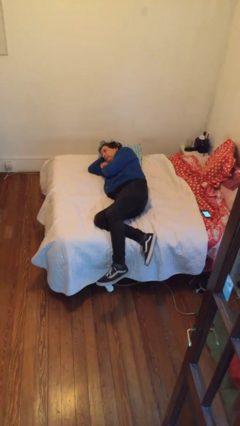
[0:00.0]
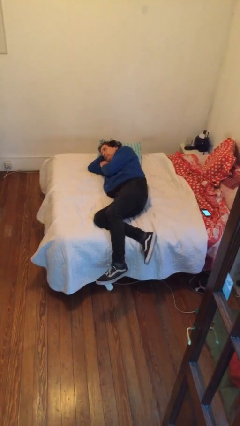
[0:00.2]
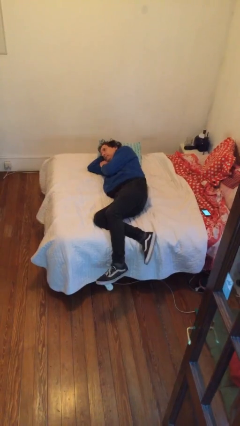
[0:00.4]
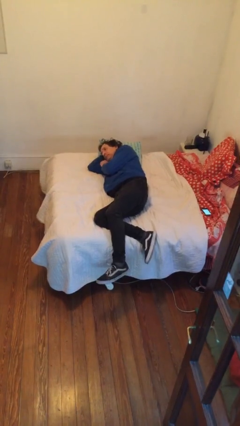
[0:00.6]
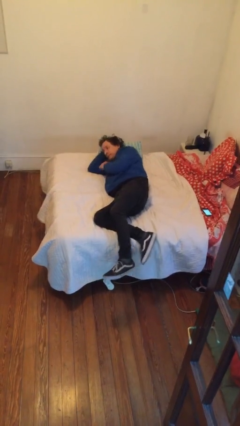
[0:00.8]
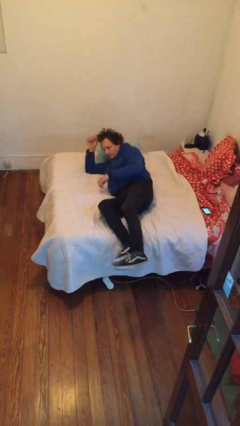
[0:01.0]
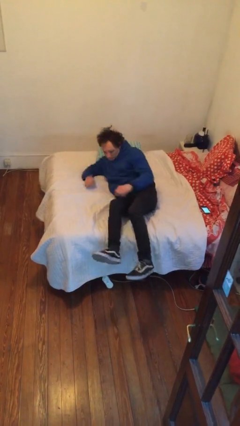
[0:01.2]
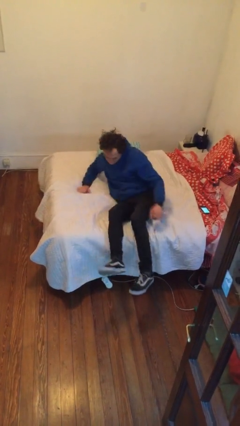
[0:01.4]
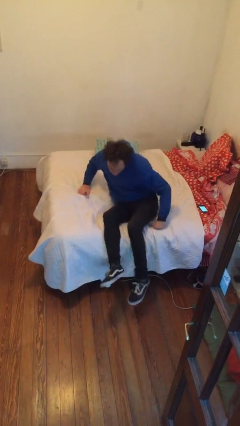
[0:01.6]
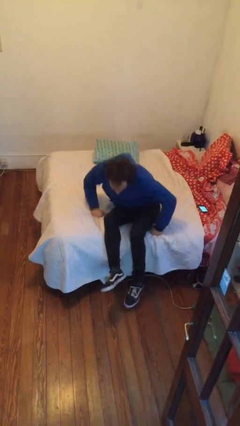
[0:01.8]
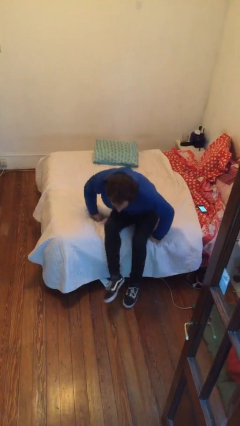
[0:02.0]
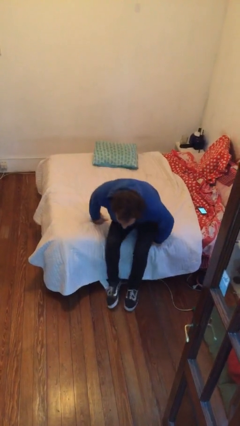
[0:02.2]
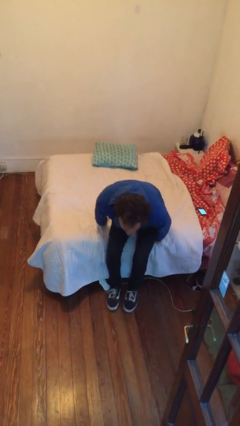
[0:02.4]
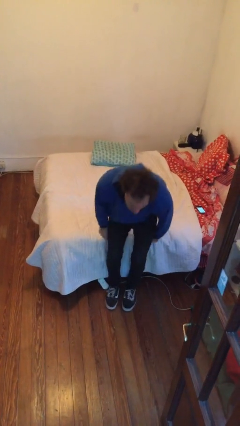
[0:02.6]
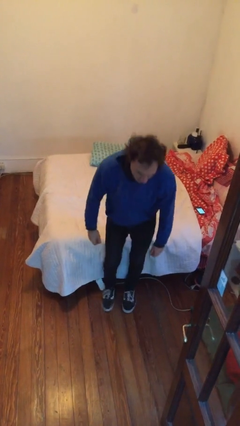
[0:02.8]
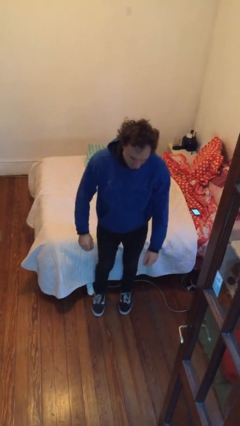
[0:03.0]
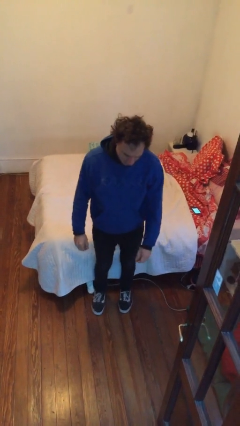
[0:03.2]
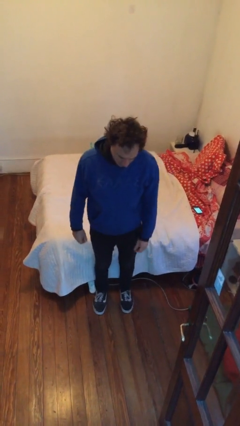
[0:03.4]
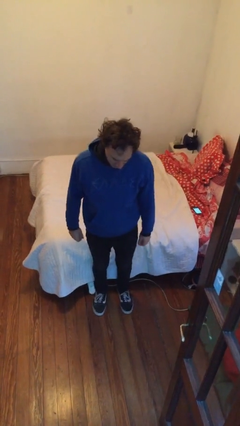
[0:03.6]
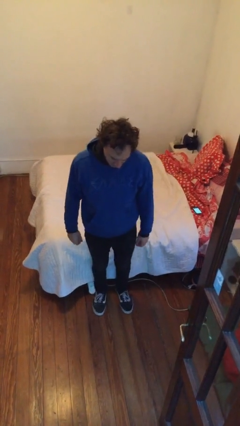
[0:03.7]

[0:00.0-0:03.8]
person stands up

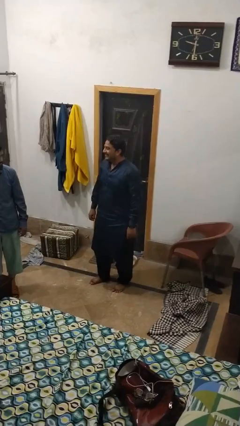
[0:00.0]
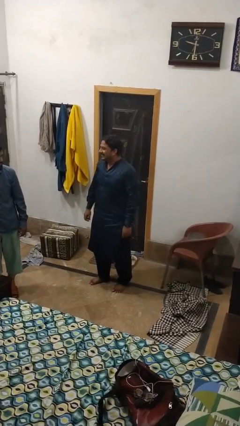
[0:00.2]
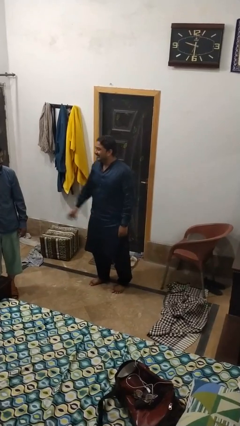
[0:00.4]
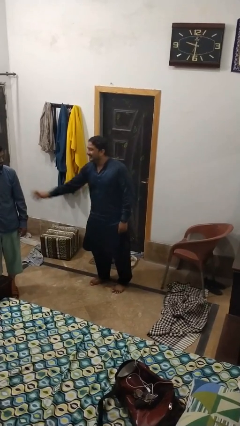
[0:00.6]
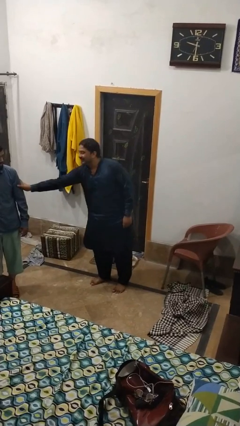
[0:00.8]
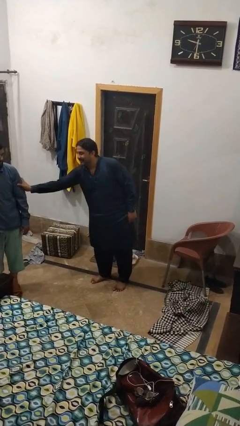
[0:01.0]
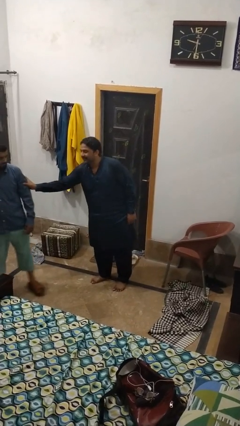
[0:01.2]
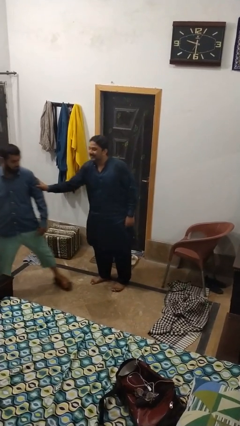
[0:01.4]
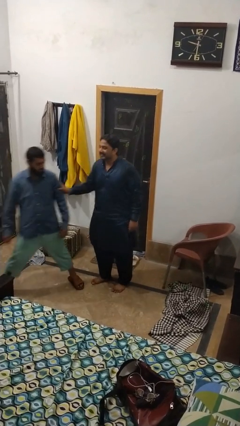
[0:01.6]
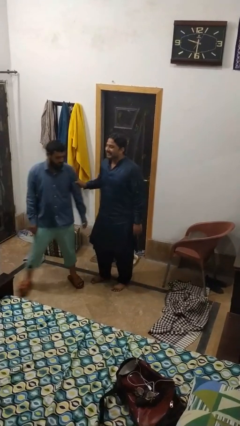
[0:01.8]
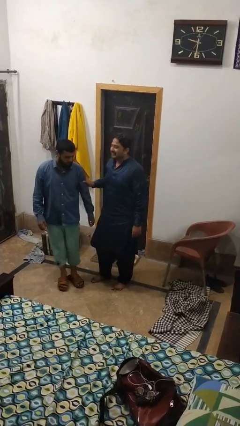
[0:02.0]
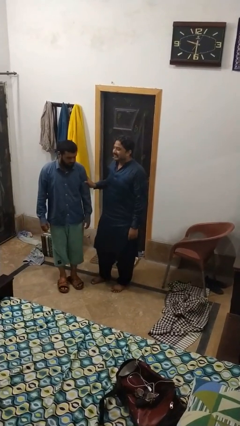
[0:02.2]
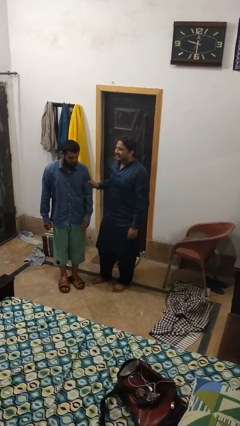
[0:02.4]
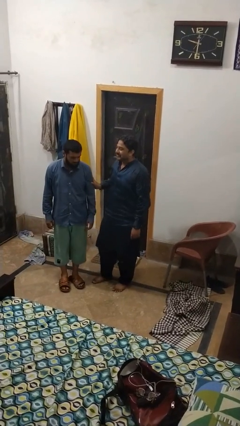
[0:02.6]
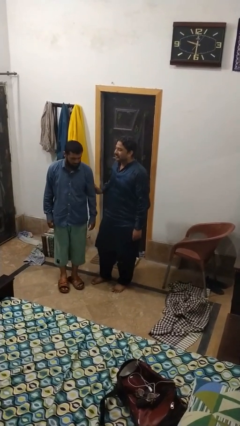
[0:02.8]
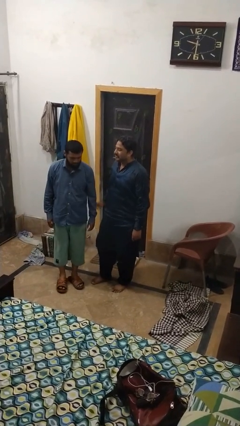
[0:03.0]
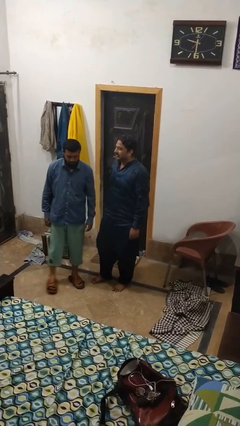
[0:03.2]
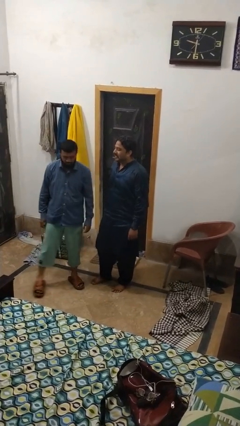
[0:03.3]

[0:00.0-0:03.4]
person grabs person by hair

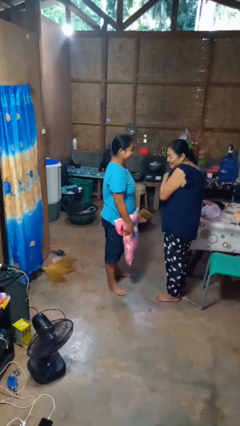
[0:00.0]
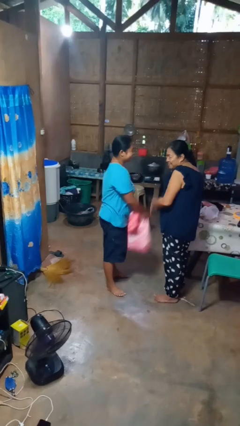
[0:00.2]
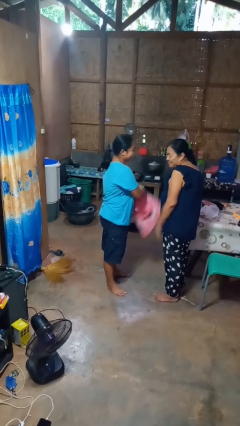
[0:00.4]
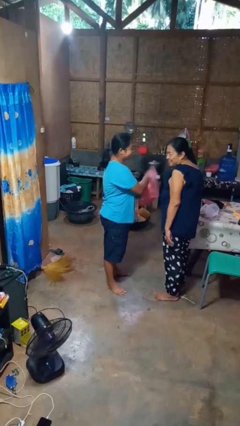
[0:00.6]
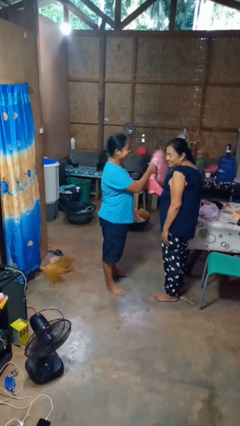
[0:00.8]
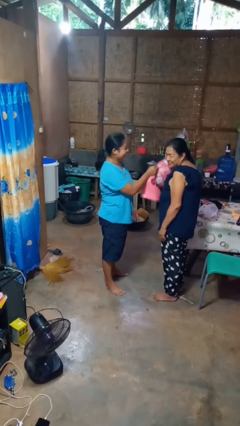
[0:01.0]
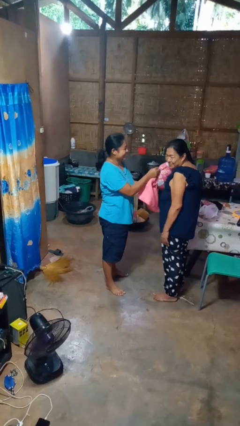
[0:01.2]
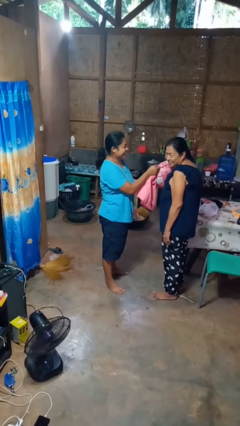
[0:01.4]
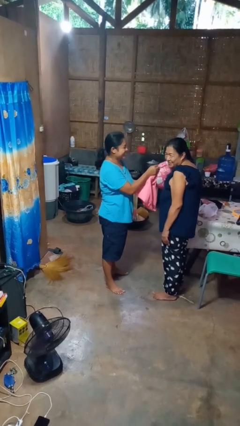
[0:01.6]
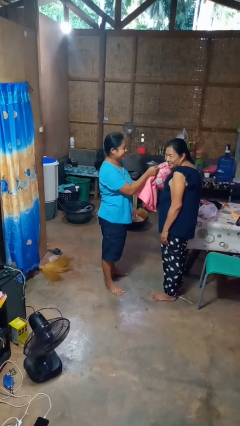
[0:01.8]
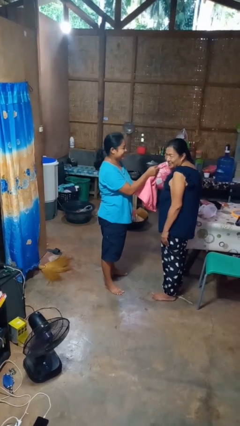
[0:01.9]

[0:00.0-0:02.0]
person hits person with pillow

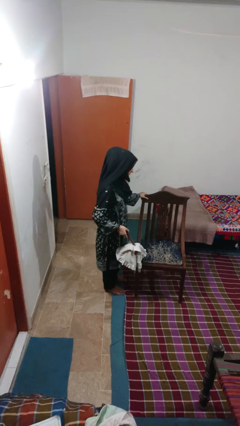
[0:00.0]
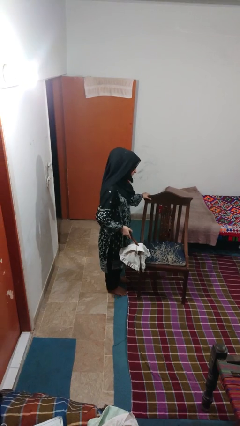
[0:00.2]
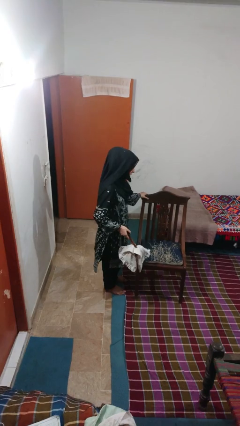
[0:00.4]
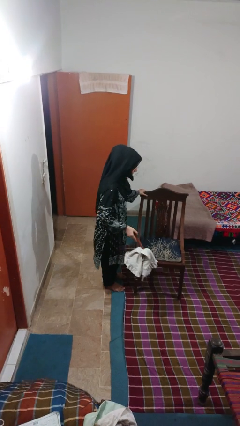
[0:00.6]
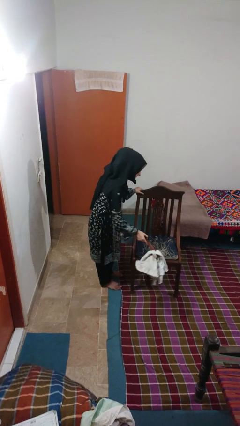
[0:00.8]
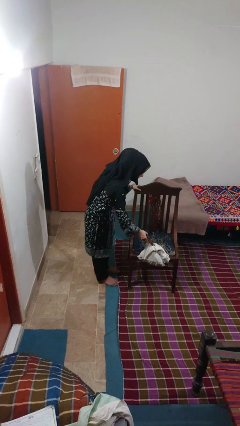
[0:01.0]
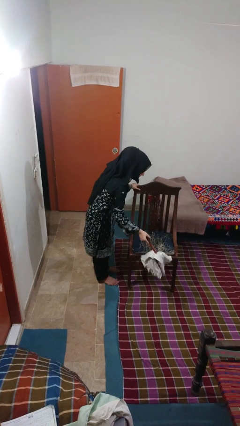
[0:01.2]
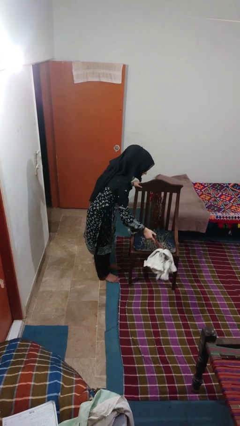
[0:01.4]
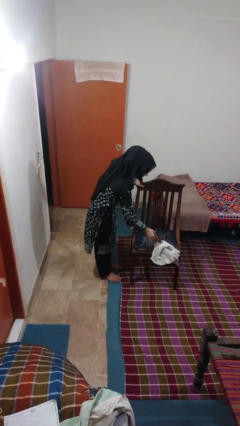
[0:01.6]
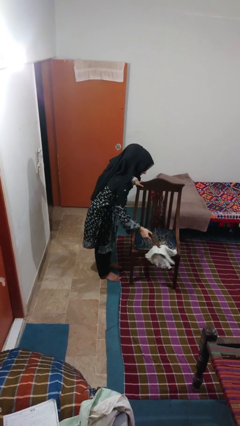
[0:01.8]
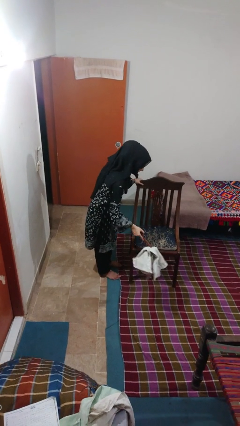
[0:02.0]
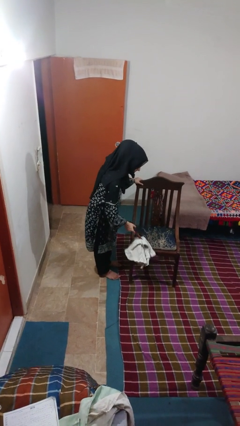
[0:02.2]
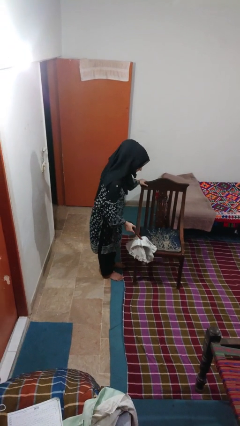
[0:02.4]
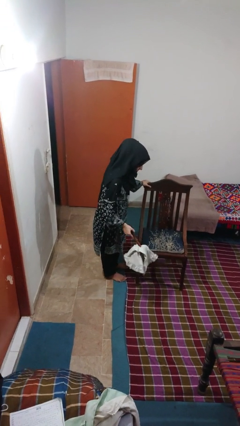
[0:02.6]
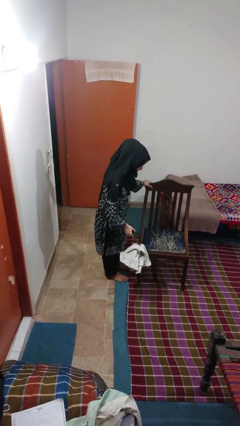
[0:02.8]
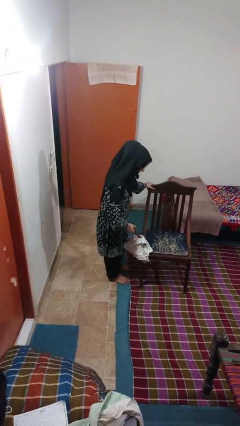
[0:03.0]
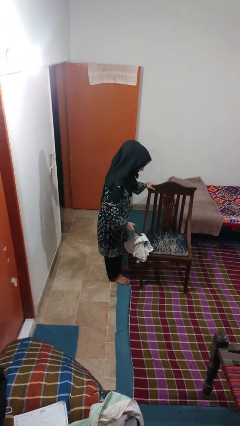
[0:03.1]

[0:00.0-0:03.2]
person dusts furniture

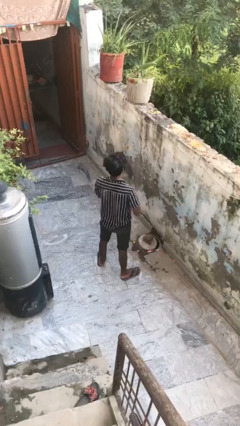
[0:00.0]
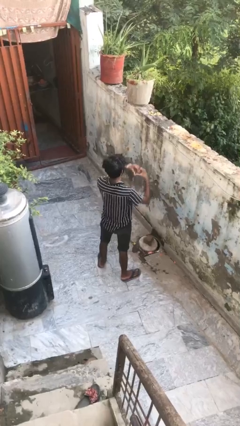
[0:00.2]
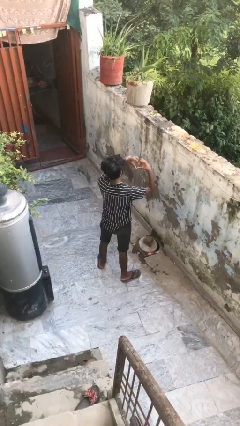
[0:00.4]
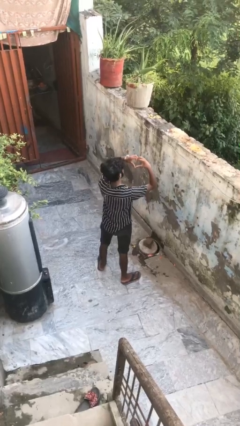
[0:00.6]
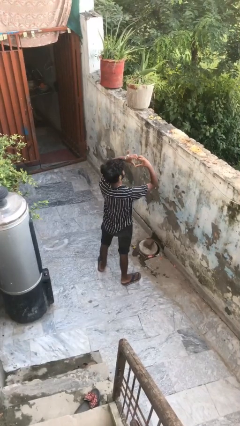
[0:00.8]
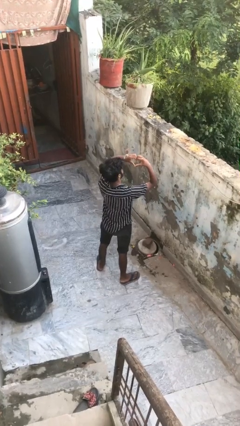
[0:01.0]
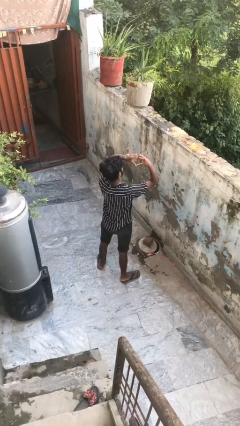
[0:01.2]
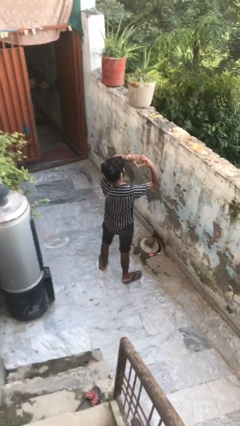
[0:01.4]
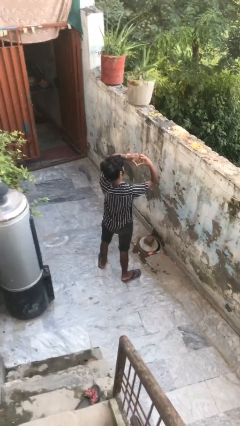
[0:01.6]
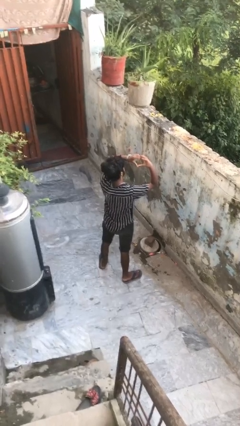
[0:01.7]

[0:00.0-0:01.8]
person gestures heart

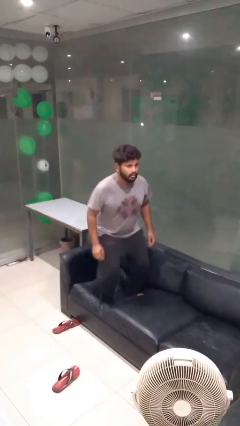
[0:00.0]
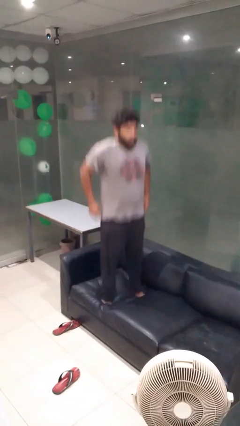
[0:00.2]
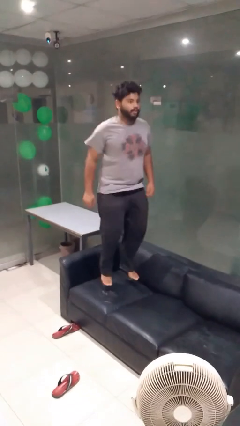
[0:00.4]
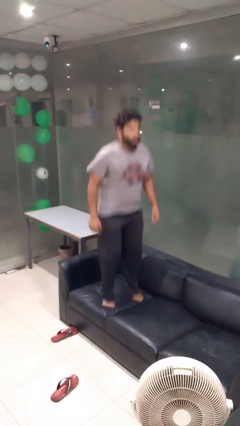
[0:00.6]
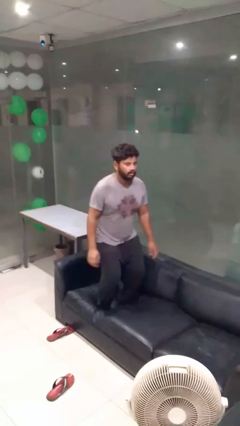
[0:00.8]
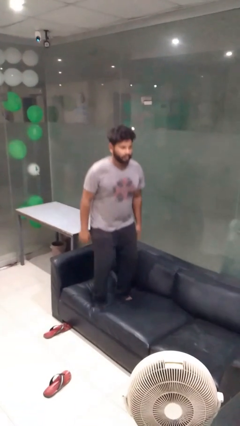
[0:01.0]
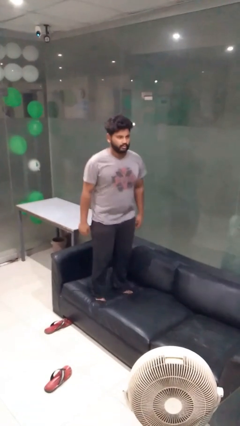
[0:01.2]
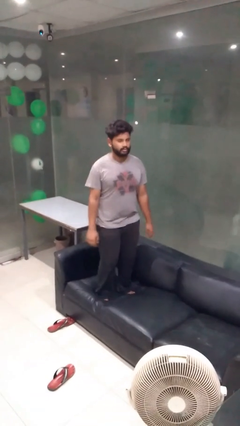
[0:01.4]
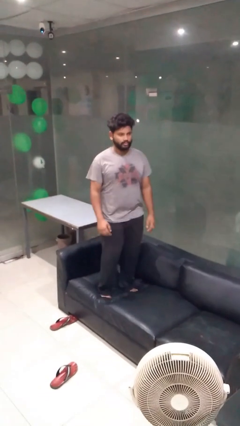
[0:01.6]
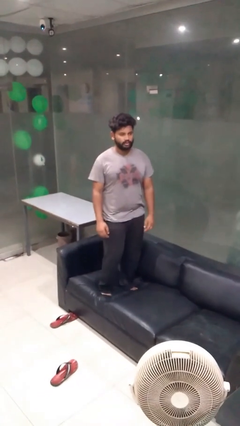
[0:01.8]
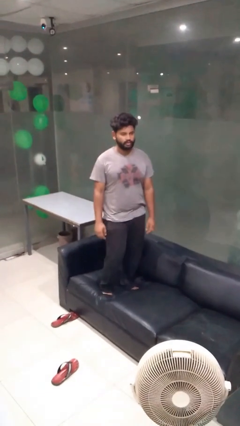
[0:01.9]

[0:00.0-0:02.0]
person jumps on couch

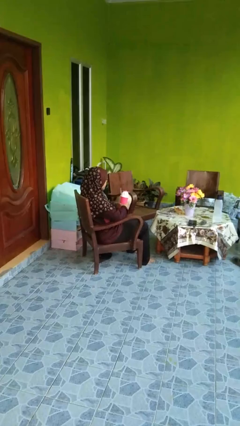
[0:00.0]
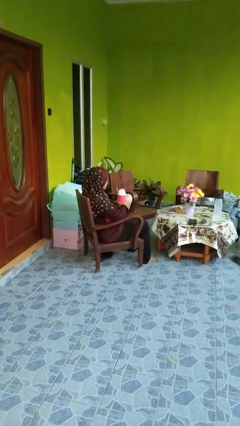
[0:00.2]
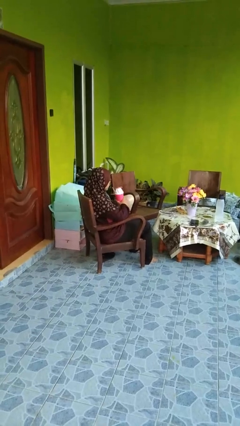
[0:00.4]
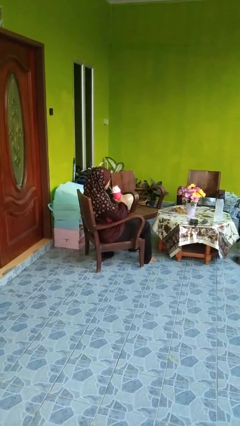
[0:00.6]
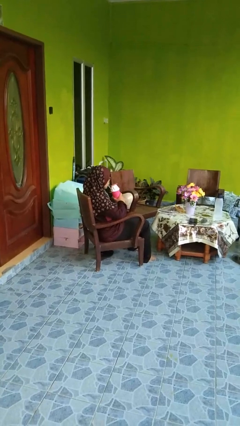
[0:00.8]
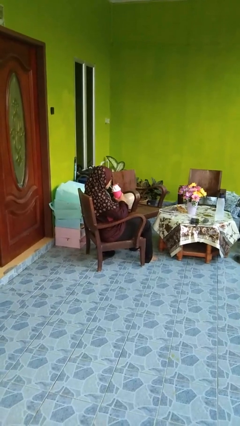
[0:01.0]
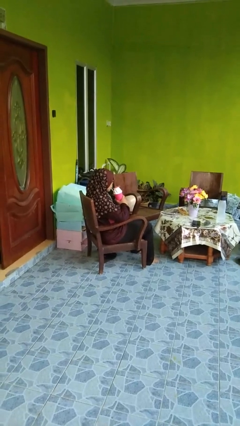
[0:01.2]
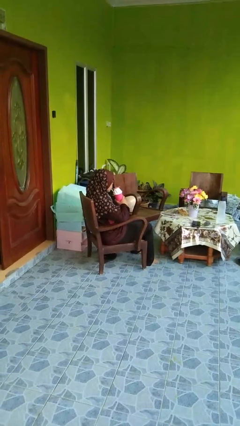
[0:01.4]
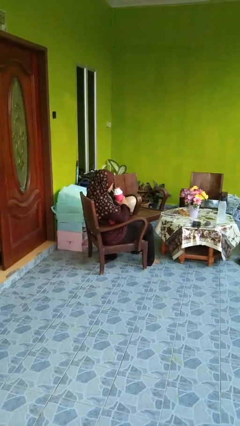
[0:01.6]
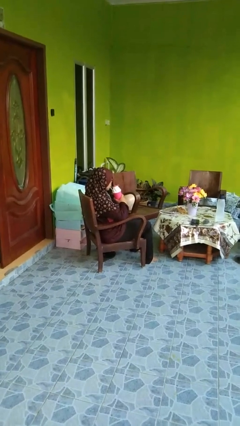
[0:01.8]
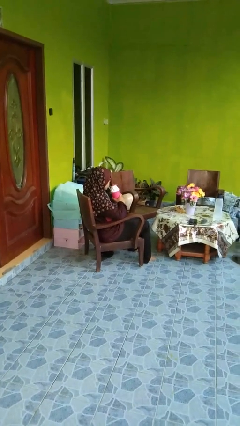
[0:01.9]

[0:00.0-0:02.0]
person drinks from straw
